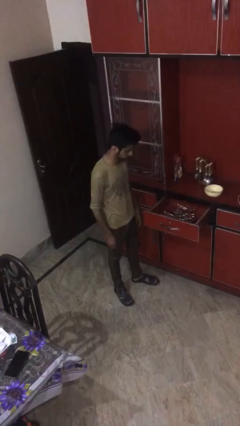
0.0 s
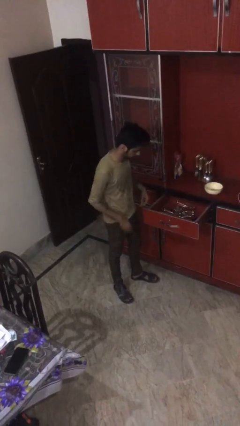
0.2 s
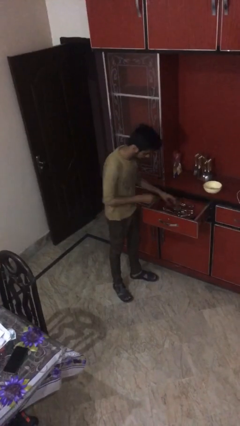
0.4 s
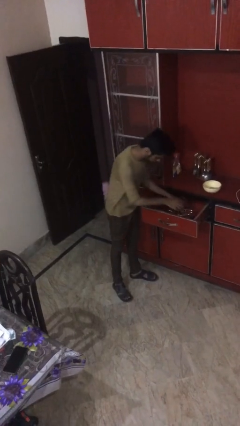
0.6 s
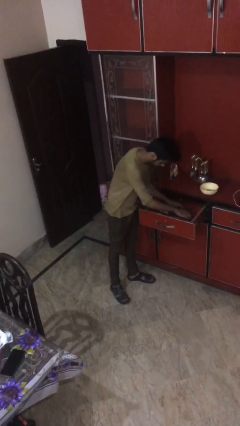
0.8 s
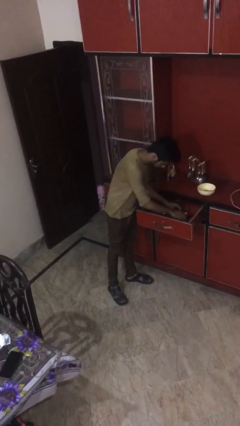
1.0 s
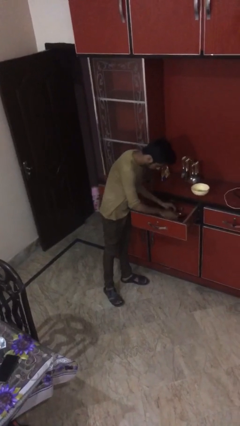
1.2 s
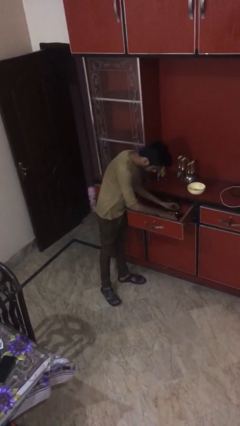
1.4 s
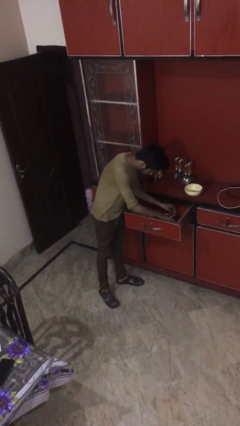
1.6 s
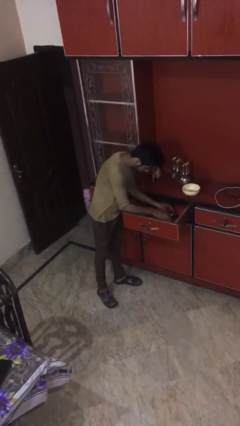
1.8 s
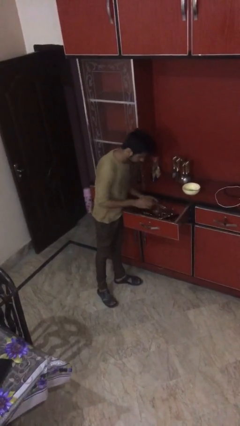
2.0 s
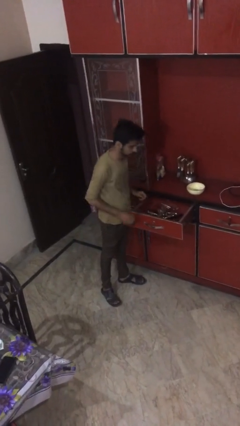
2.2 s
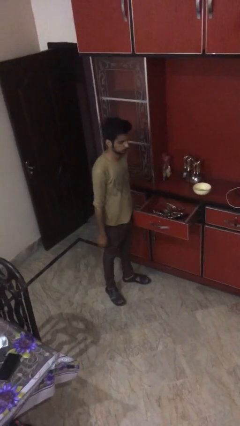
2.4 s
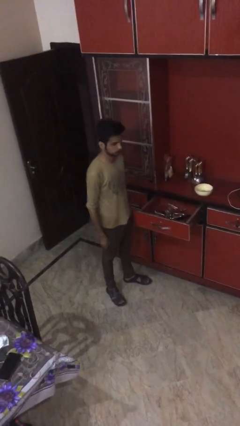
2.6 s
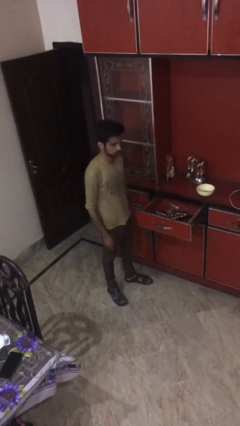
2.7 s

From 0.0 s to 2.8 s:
person searches in kitchen drawer

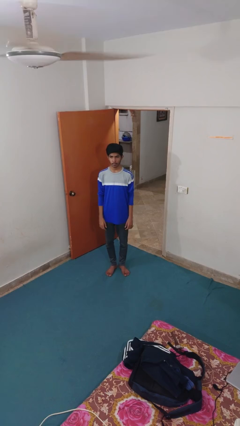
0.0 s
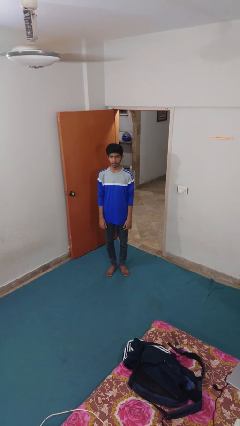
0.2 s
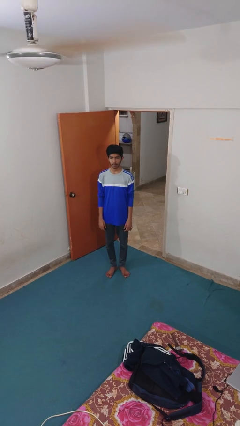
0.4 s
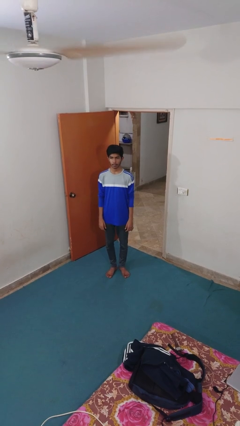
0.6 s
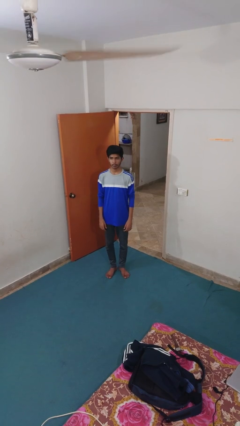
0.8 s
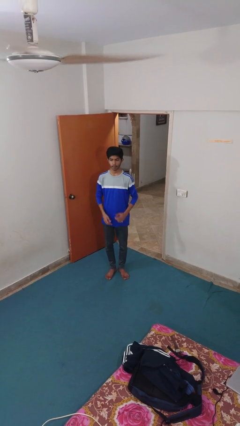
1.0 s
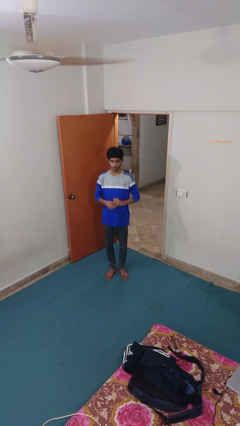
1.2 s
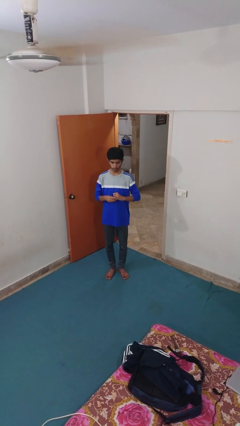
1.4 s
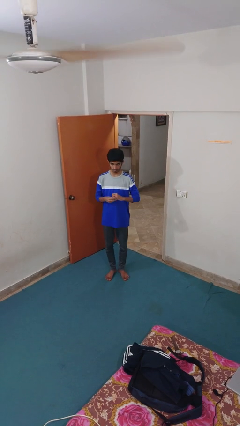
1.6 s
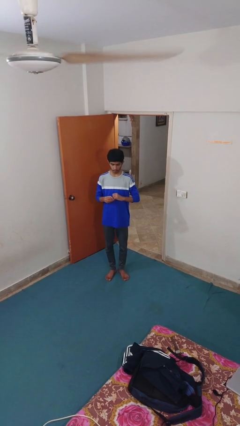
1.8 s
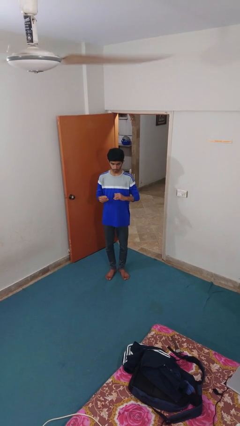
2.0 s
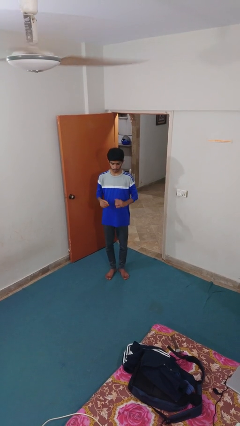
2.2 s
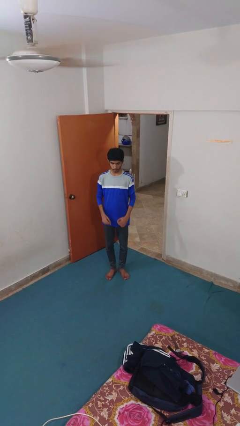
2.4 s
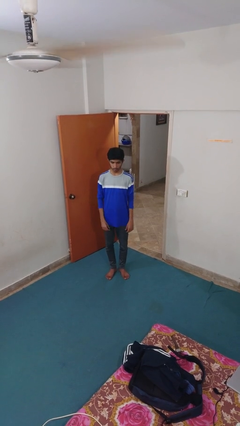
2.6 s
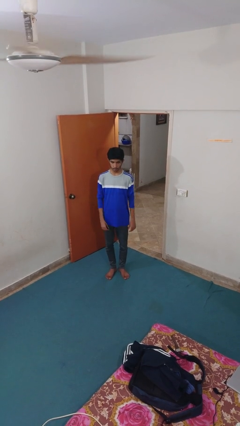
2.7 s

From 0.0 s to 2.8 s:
person takes off ring

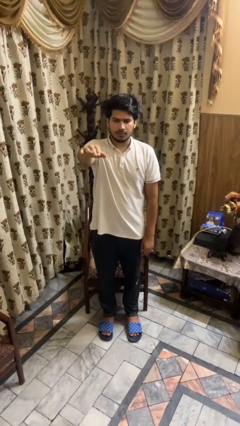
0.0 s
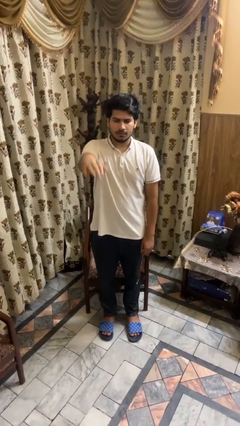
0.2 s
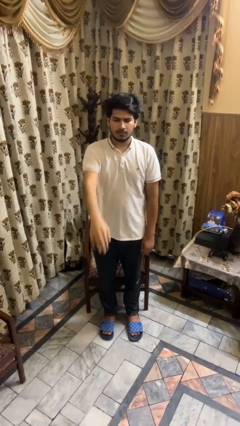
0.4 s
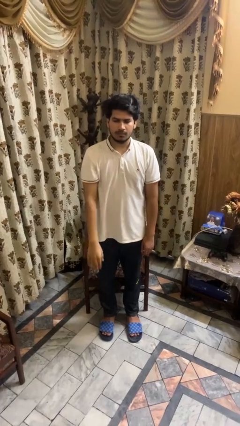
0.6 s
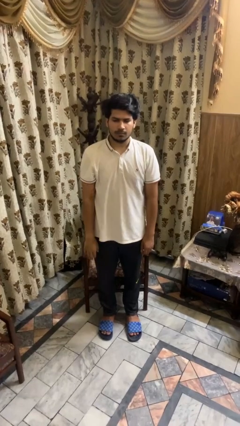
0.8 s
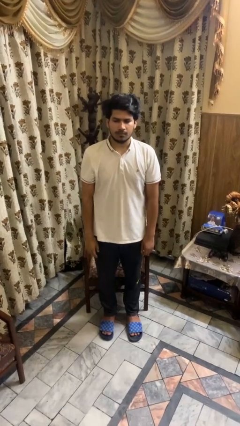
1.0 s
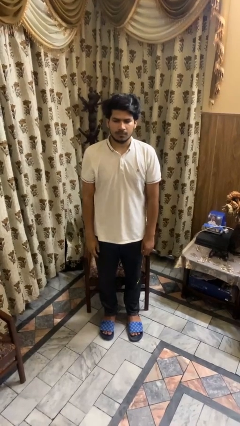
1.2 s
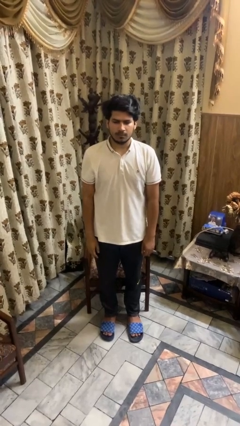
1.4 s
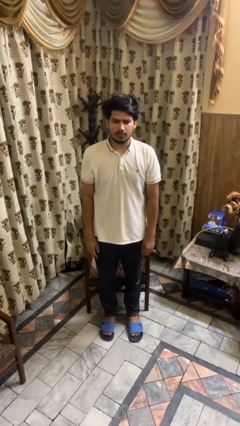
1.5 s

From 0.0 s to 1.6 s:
person gestures swipe down

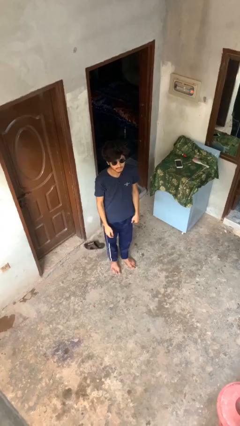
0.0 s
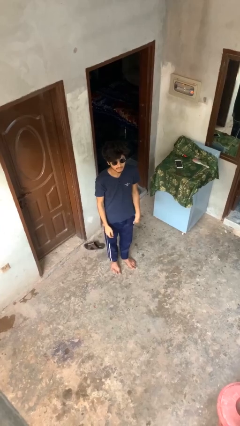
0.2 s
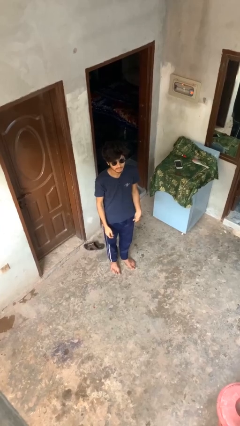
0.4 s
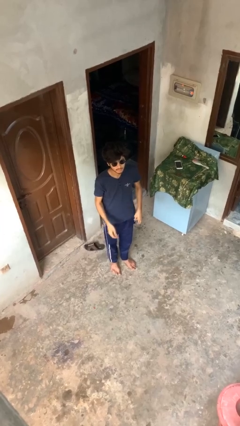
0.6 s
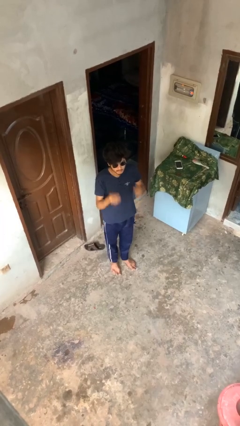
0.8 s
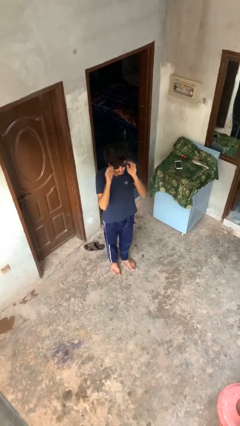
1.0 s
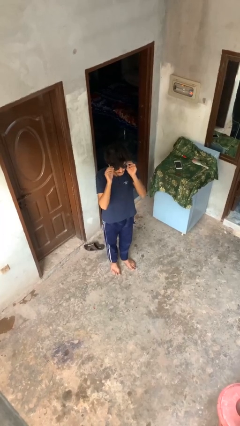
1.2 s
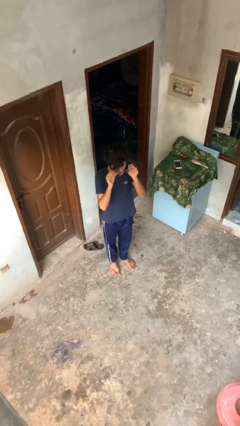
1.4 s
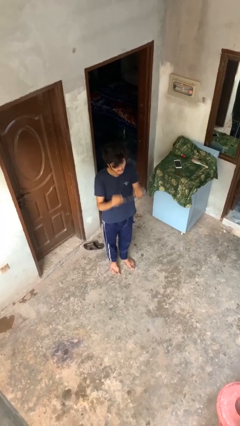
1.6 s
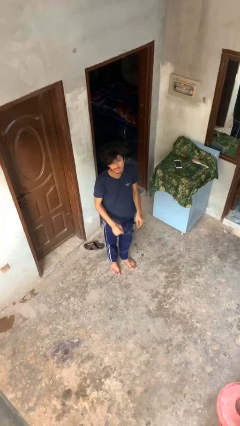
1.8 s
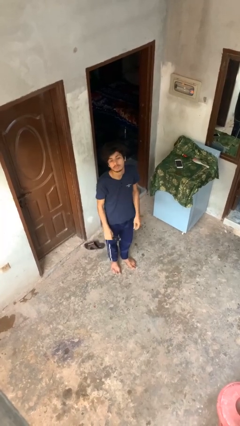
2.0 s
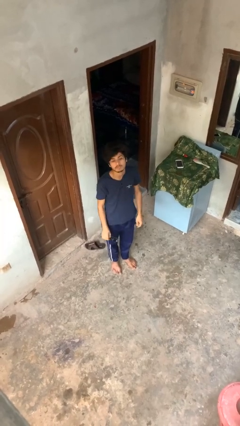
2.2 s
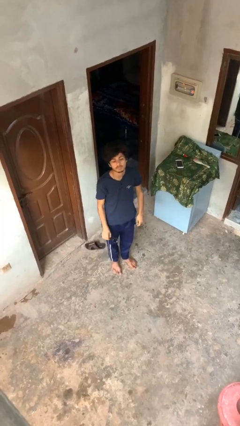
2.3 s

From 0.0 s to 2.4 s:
person takes off sunglasses

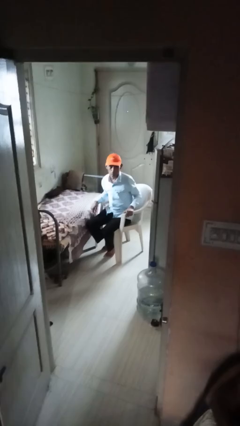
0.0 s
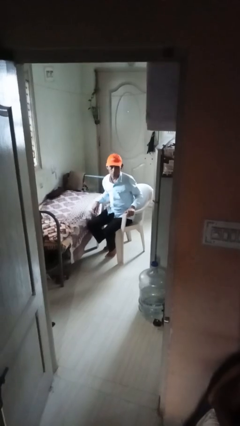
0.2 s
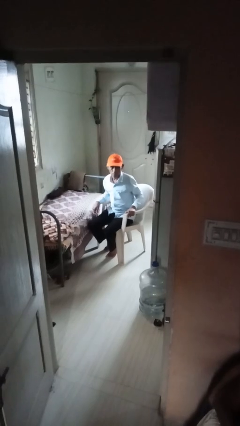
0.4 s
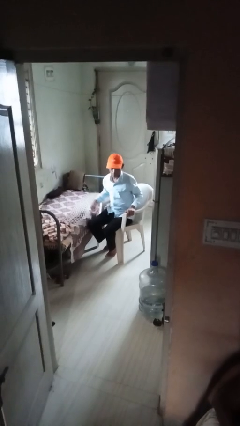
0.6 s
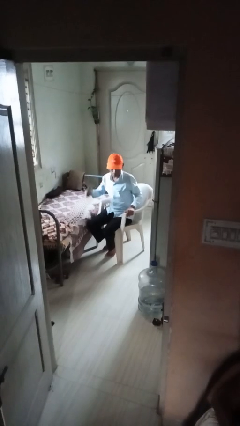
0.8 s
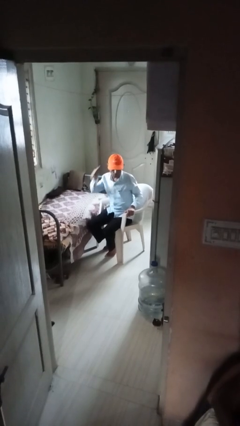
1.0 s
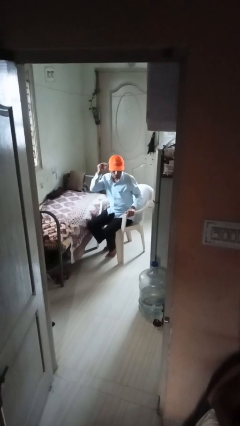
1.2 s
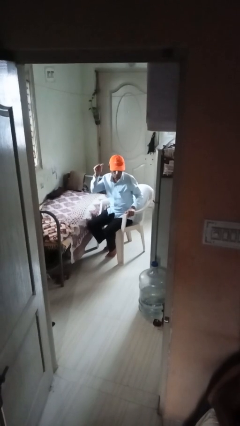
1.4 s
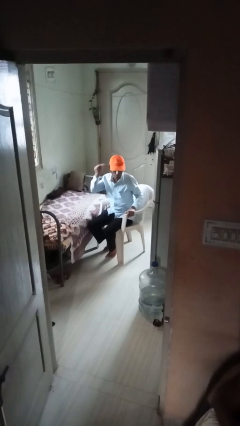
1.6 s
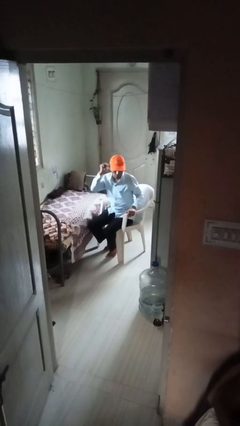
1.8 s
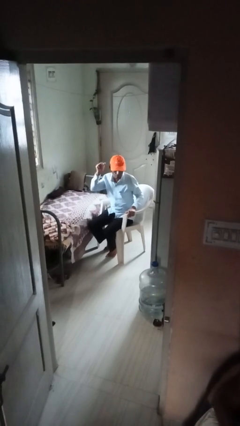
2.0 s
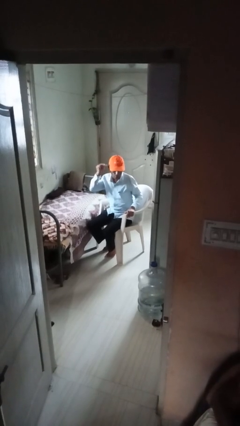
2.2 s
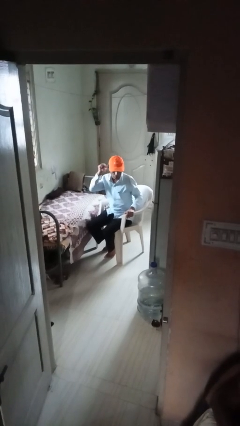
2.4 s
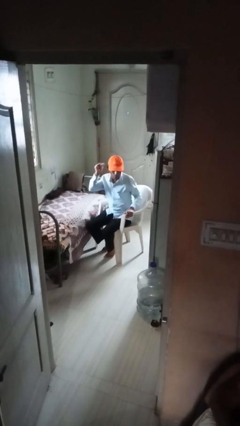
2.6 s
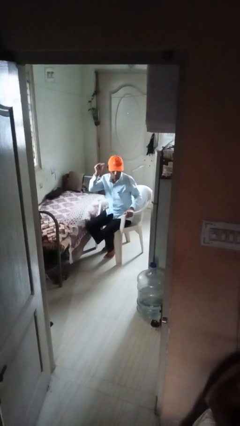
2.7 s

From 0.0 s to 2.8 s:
person gestures behind me

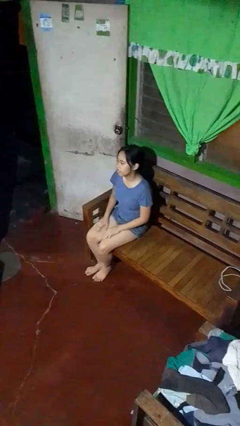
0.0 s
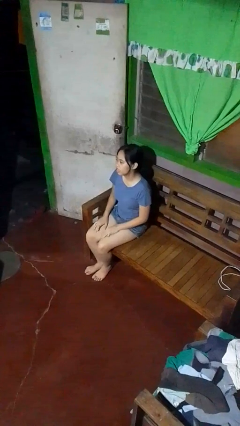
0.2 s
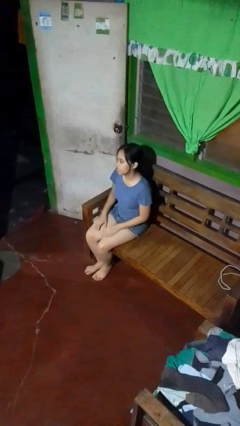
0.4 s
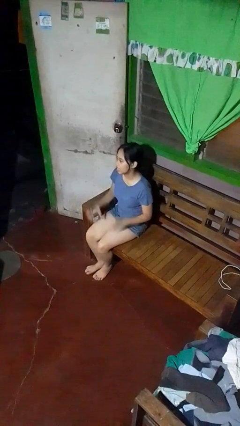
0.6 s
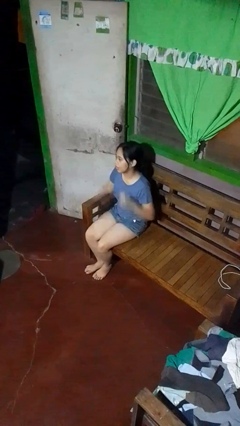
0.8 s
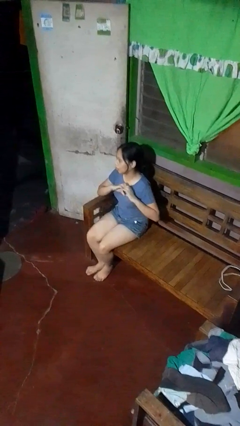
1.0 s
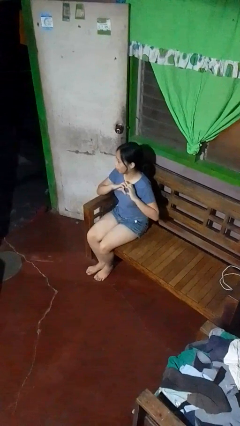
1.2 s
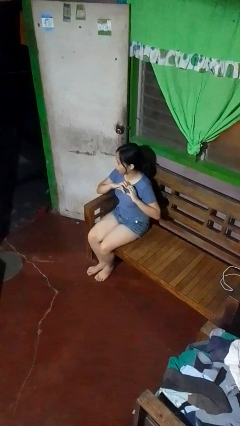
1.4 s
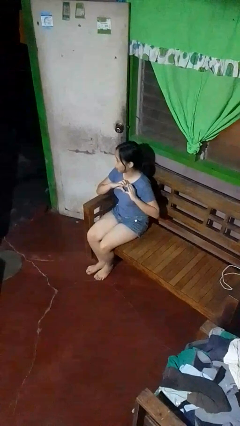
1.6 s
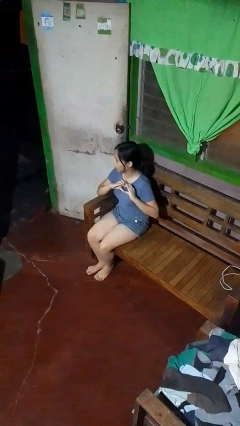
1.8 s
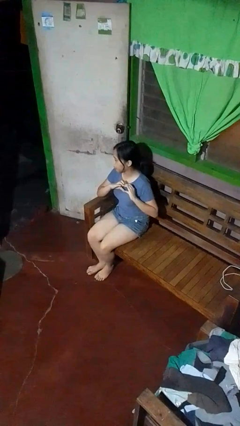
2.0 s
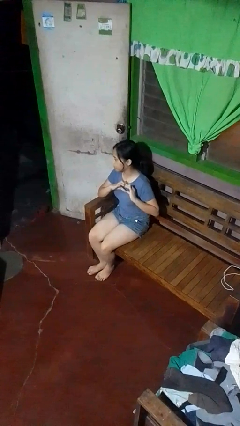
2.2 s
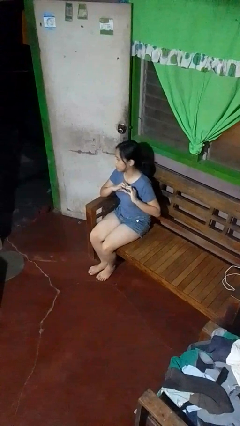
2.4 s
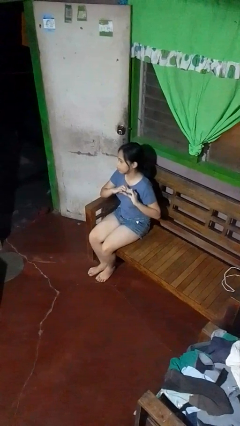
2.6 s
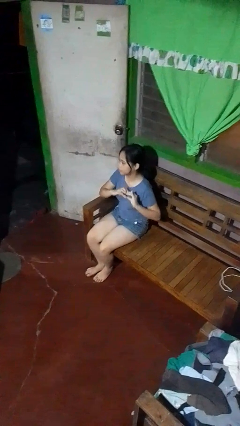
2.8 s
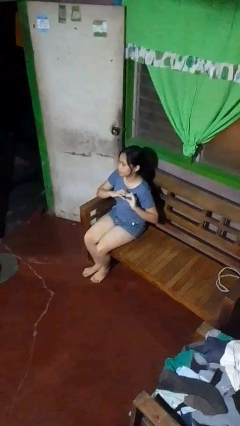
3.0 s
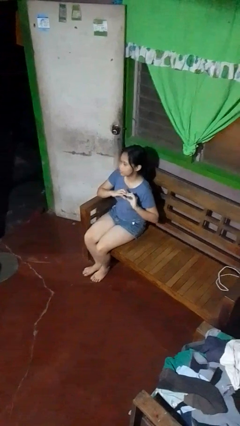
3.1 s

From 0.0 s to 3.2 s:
person gestures heart

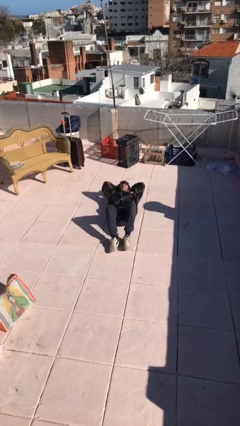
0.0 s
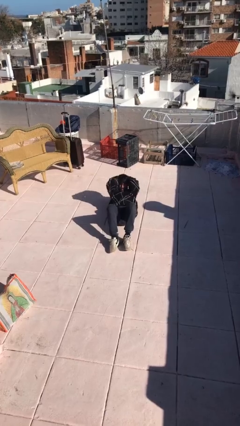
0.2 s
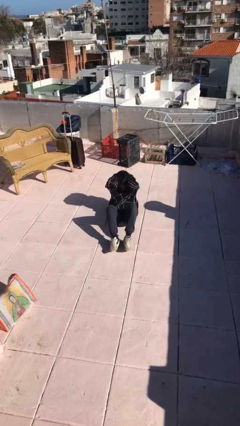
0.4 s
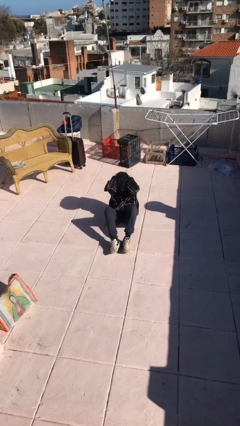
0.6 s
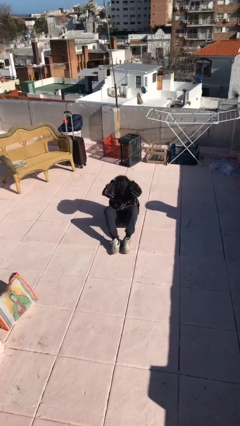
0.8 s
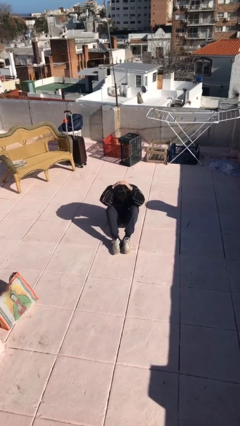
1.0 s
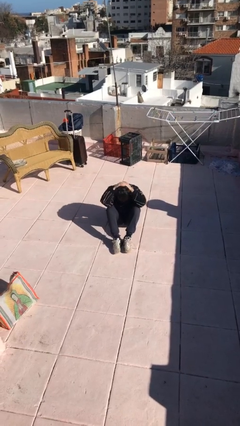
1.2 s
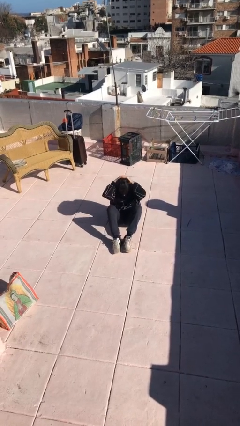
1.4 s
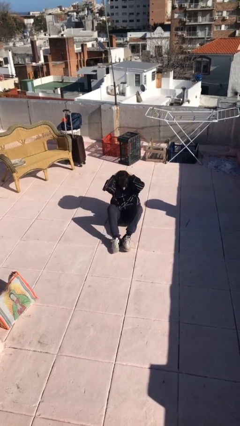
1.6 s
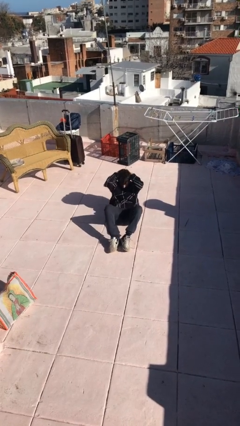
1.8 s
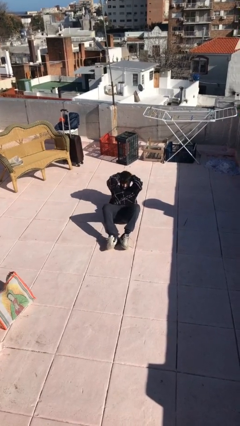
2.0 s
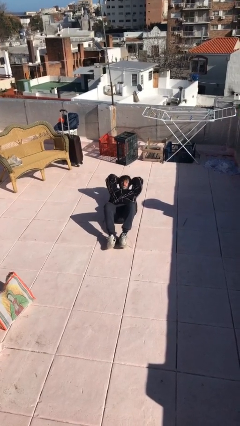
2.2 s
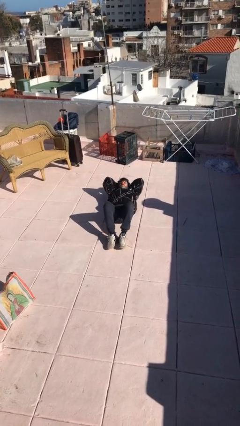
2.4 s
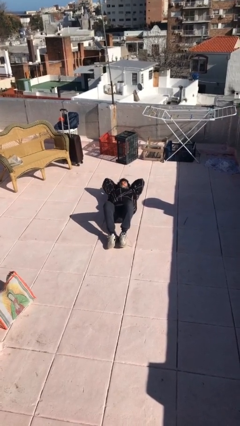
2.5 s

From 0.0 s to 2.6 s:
person exercises with situp
